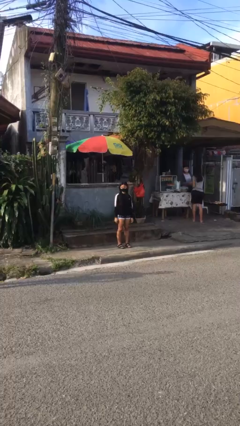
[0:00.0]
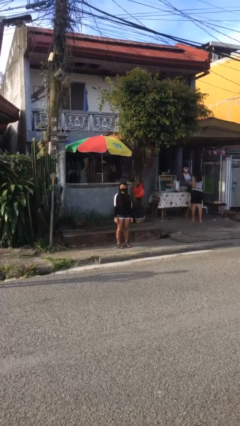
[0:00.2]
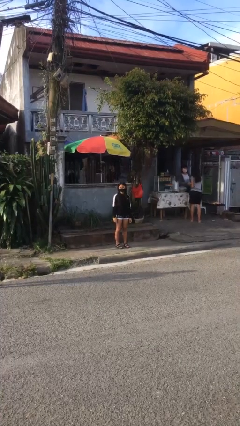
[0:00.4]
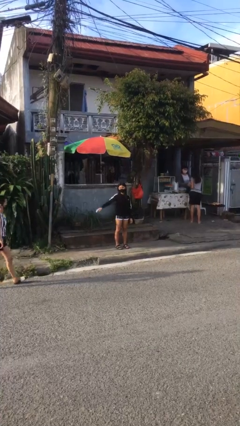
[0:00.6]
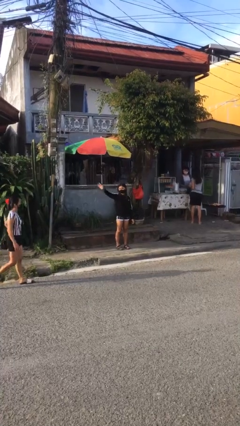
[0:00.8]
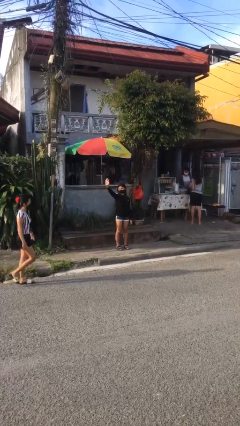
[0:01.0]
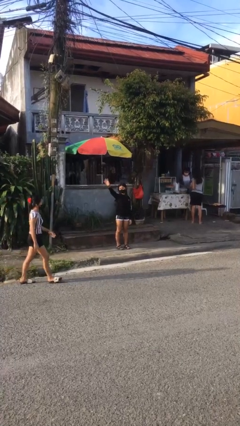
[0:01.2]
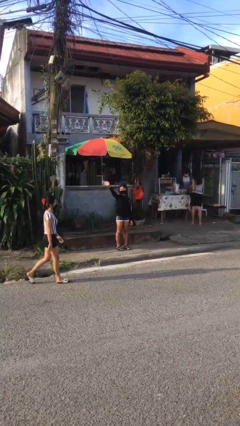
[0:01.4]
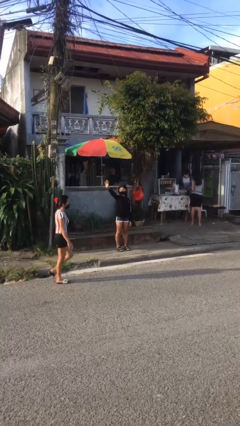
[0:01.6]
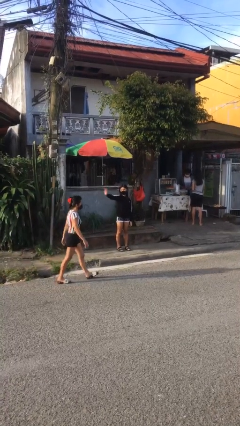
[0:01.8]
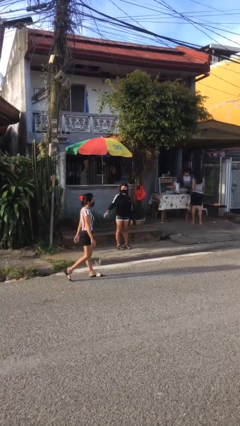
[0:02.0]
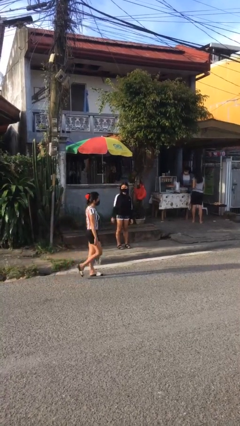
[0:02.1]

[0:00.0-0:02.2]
person waves at person

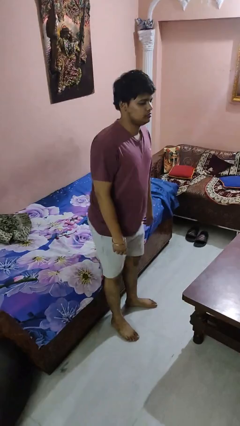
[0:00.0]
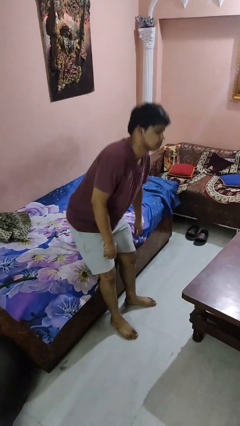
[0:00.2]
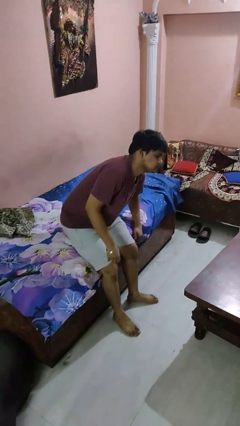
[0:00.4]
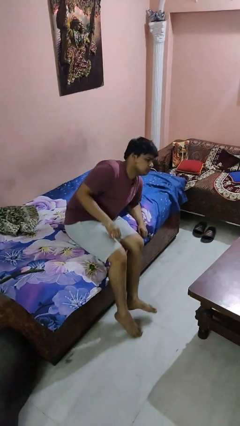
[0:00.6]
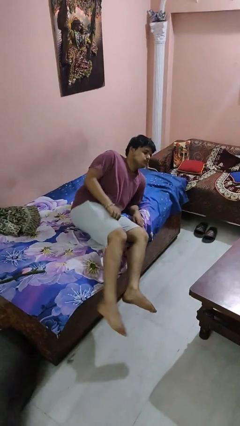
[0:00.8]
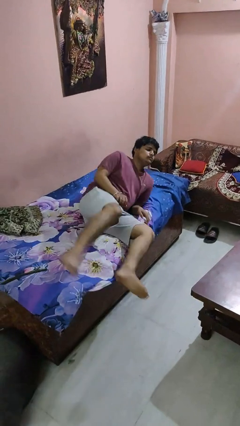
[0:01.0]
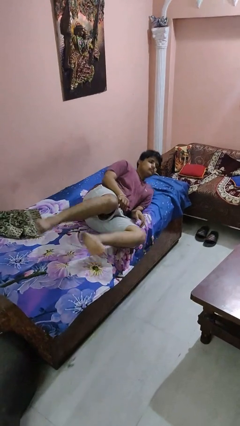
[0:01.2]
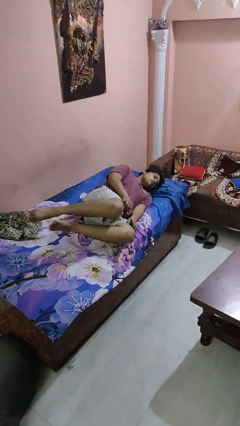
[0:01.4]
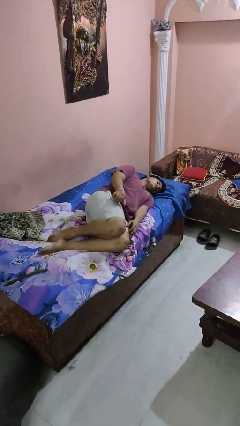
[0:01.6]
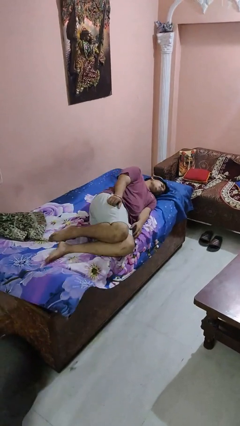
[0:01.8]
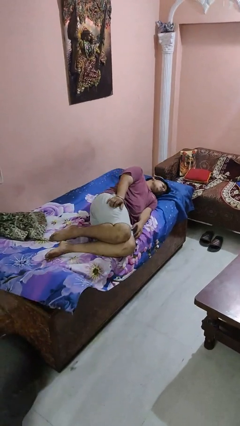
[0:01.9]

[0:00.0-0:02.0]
person lies down on bed

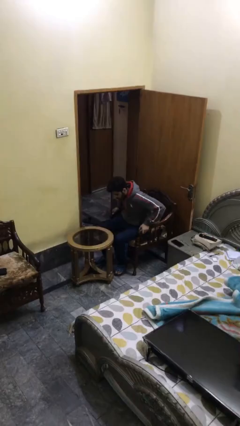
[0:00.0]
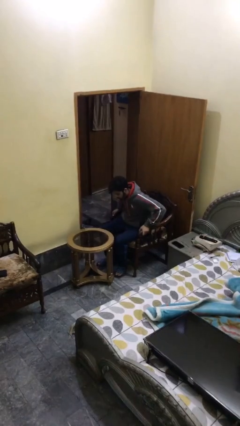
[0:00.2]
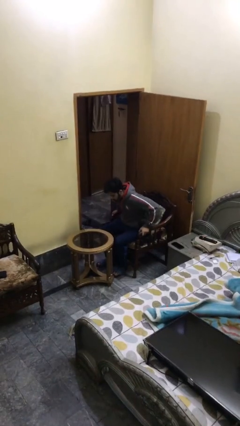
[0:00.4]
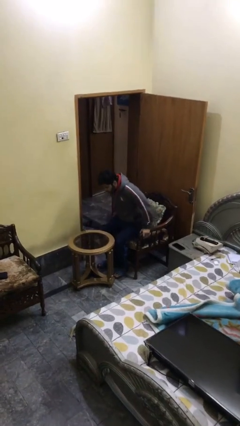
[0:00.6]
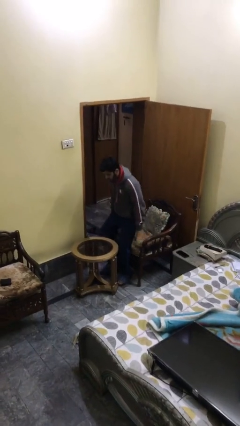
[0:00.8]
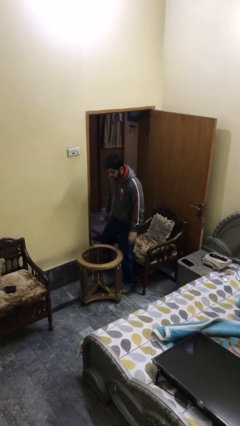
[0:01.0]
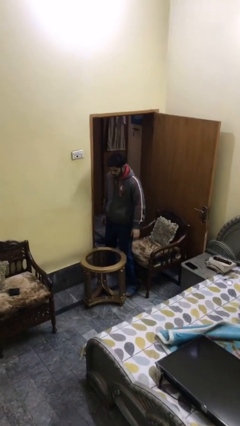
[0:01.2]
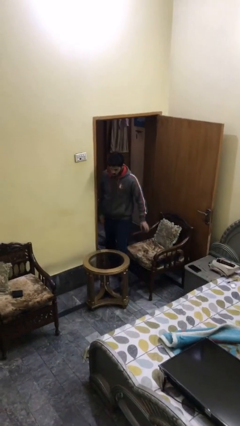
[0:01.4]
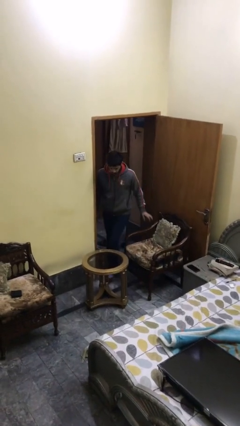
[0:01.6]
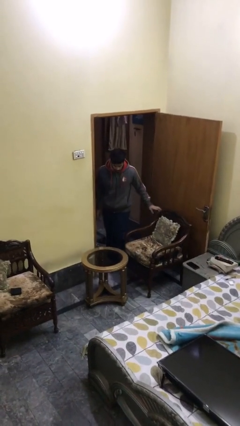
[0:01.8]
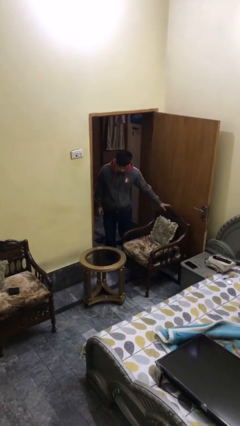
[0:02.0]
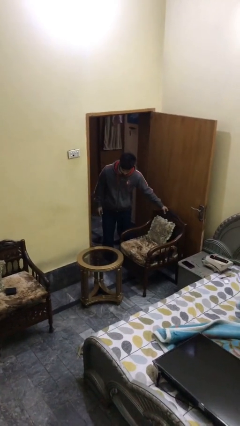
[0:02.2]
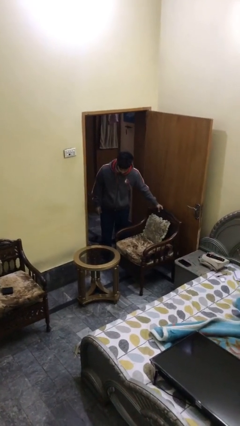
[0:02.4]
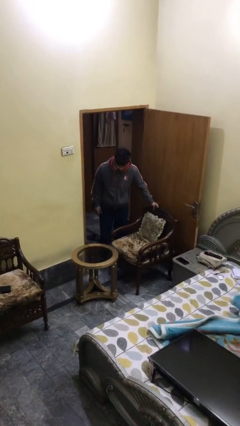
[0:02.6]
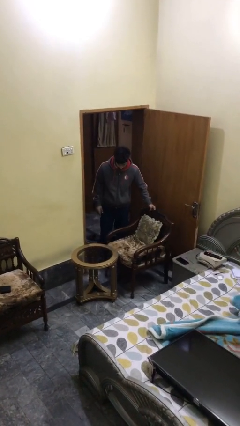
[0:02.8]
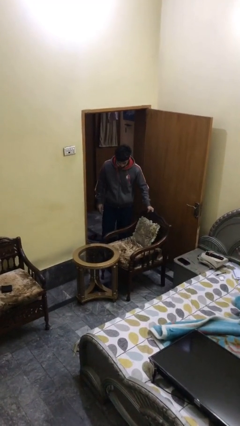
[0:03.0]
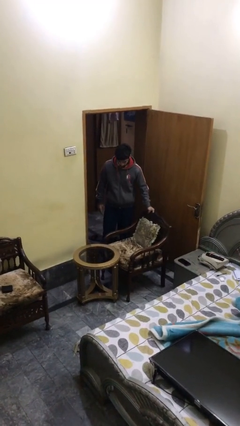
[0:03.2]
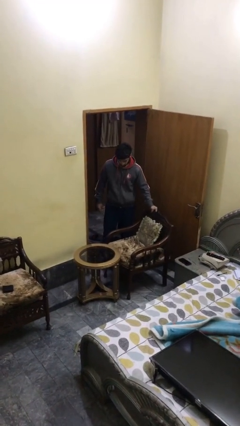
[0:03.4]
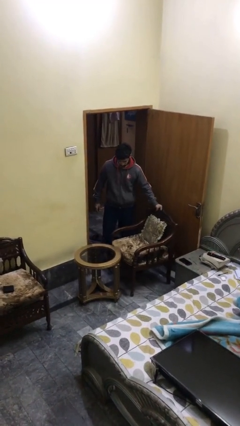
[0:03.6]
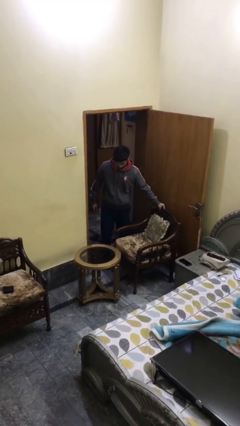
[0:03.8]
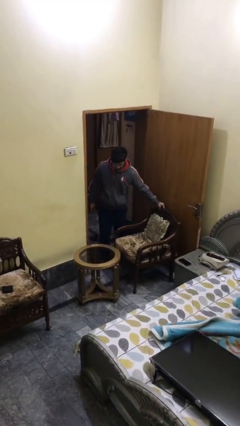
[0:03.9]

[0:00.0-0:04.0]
person stands up

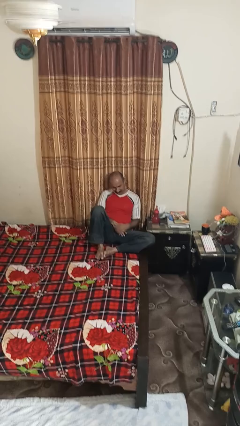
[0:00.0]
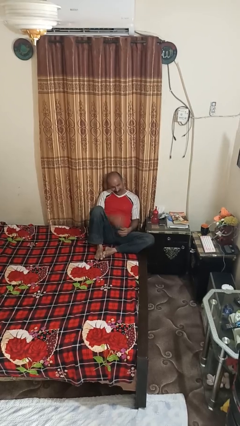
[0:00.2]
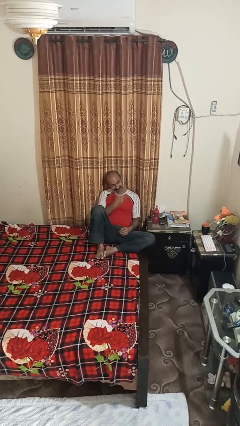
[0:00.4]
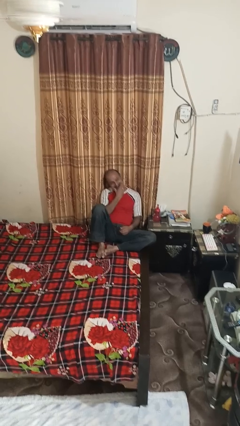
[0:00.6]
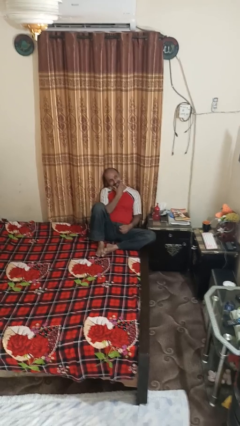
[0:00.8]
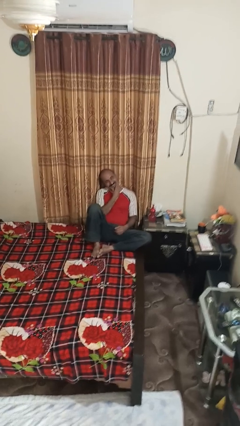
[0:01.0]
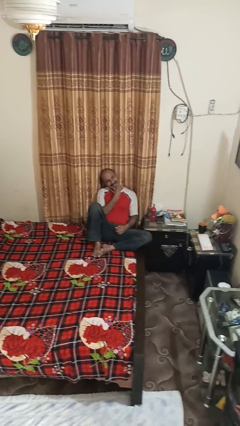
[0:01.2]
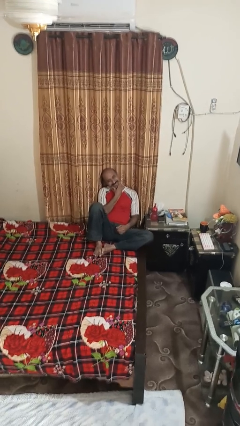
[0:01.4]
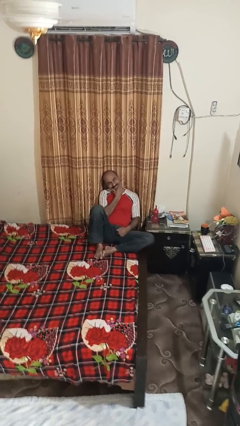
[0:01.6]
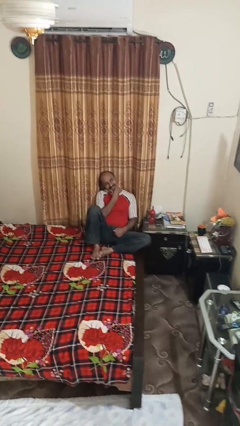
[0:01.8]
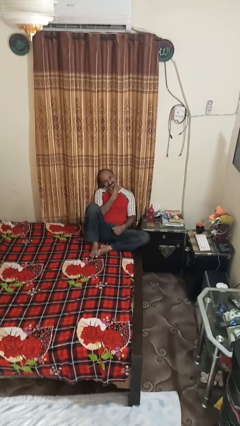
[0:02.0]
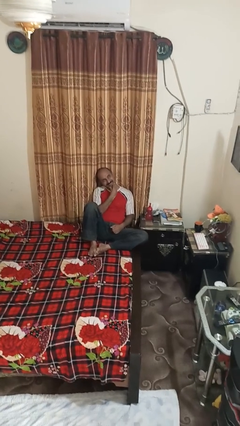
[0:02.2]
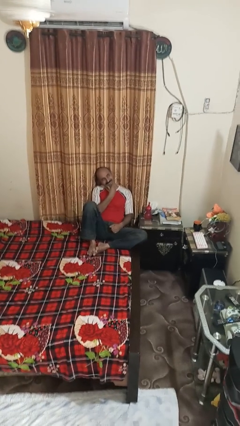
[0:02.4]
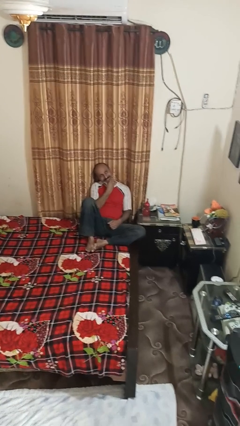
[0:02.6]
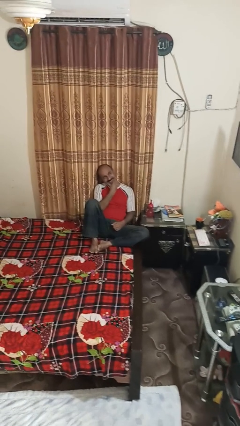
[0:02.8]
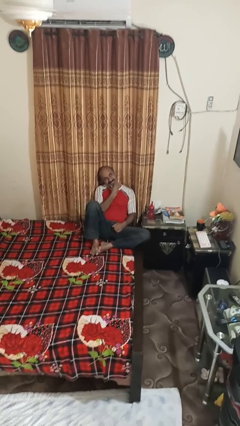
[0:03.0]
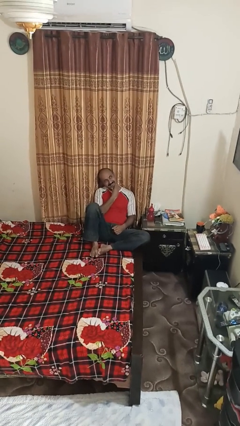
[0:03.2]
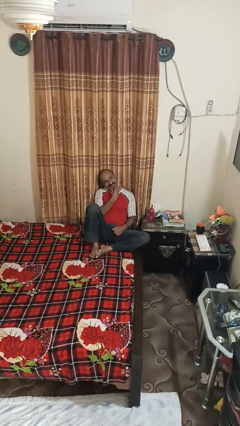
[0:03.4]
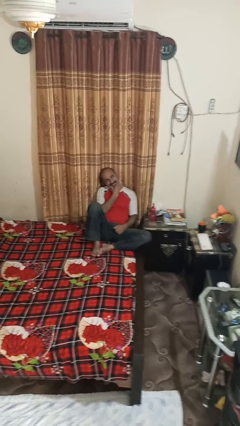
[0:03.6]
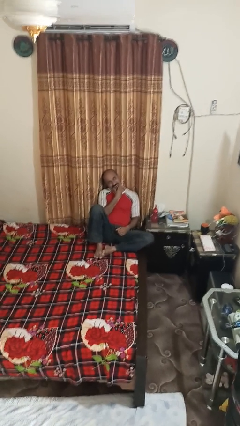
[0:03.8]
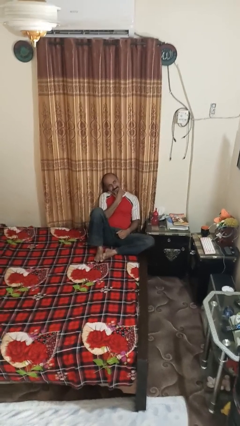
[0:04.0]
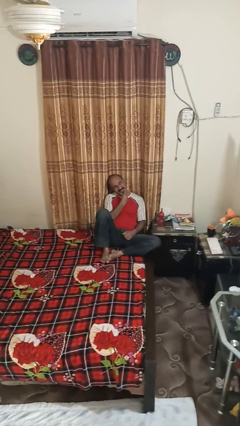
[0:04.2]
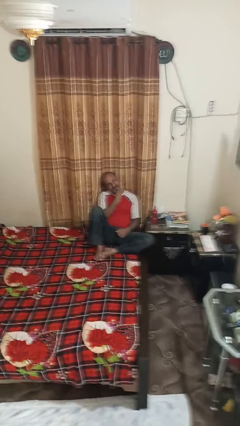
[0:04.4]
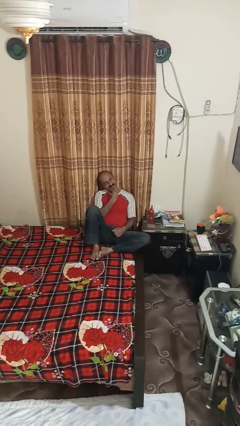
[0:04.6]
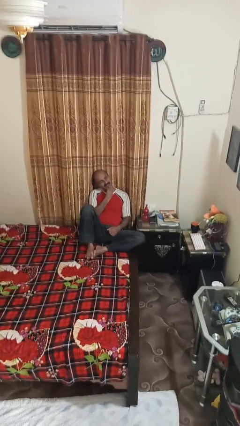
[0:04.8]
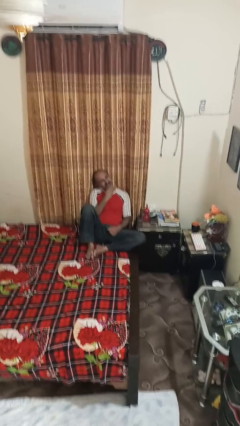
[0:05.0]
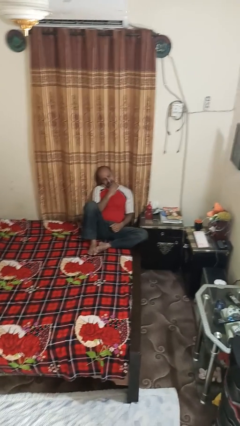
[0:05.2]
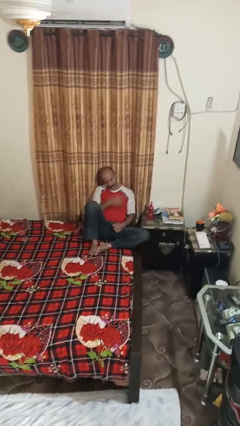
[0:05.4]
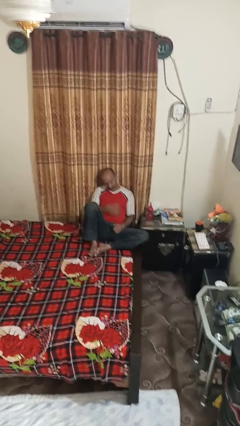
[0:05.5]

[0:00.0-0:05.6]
person strokes chin

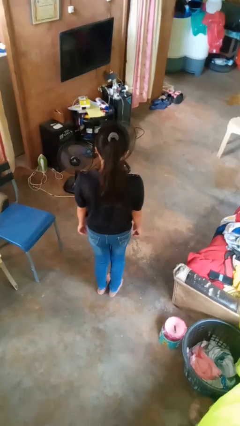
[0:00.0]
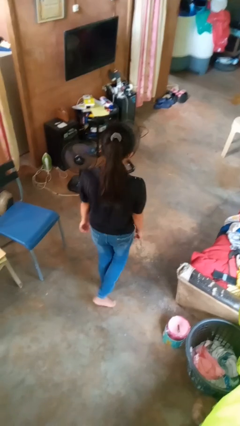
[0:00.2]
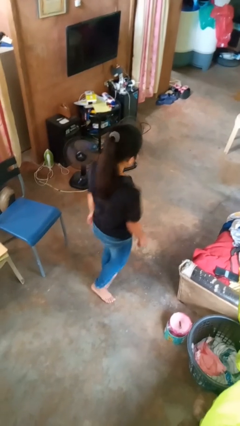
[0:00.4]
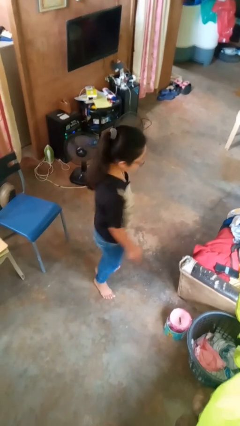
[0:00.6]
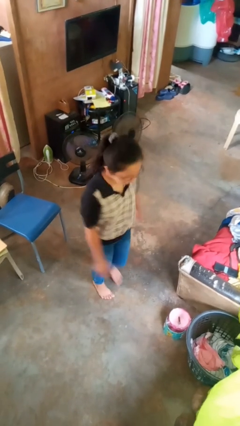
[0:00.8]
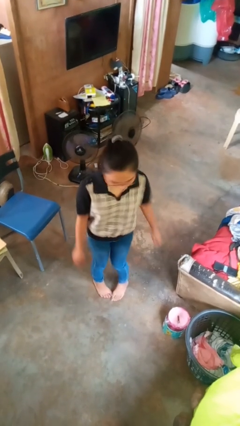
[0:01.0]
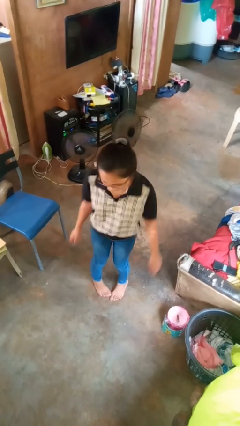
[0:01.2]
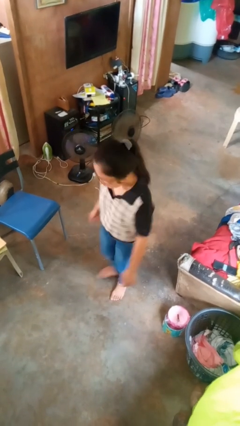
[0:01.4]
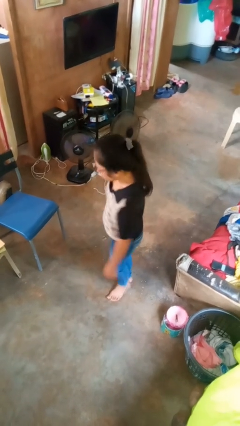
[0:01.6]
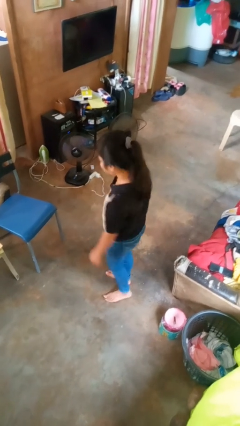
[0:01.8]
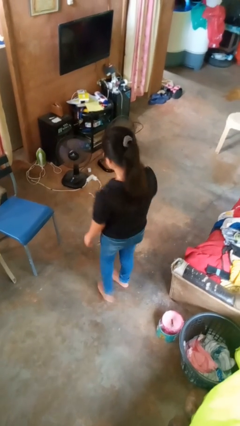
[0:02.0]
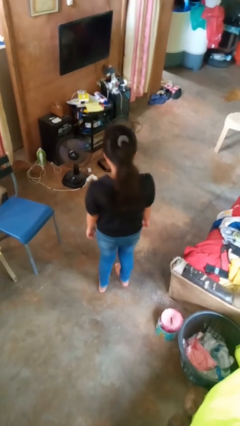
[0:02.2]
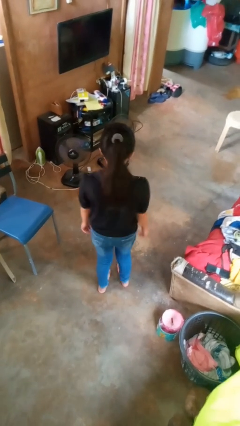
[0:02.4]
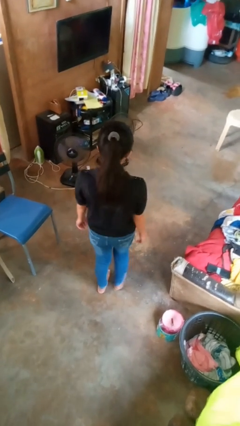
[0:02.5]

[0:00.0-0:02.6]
person twirls

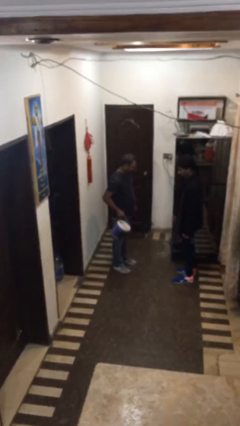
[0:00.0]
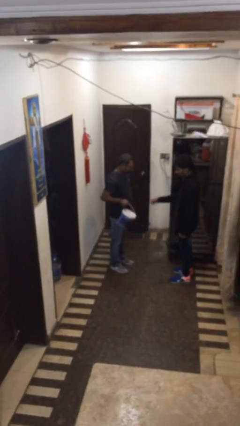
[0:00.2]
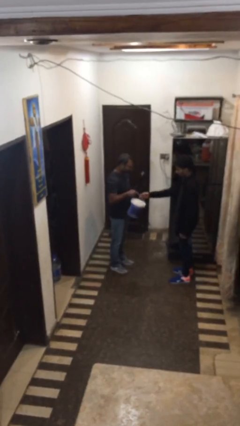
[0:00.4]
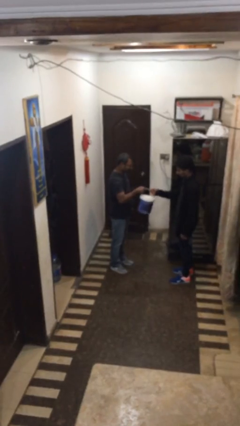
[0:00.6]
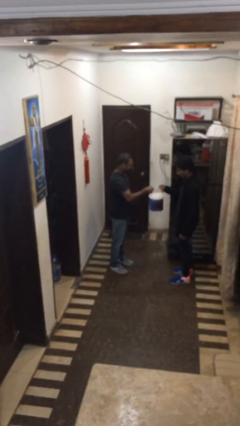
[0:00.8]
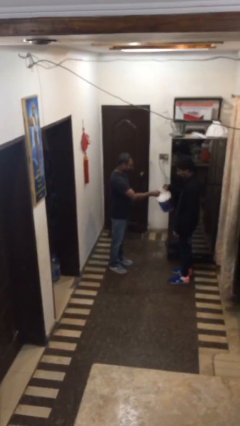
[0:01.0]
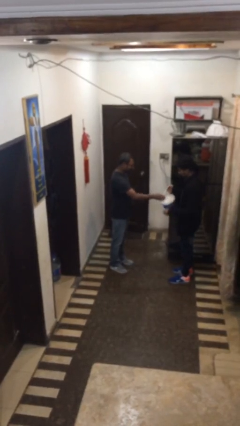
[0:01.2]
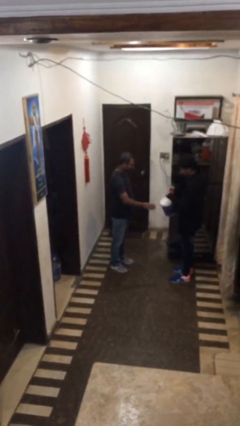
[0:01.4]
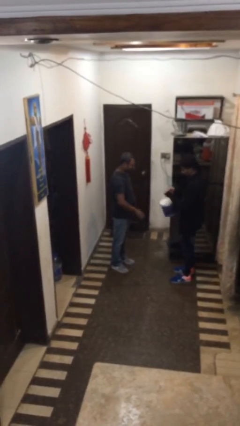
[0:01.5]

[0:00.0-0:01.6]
person transfers object to person
